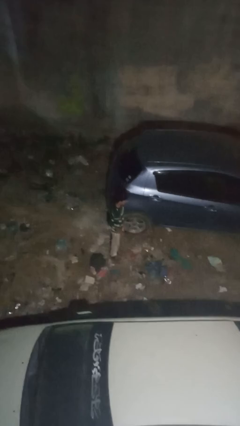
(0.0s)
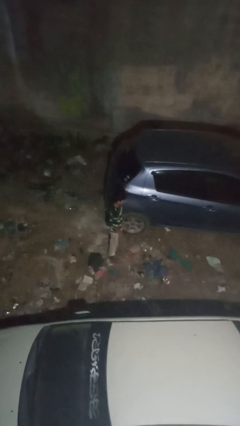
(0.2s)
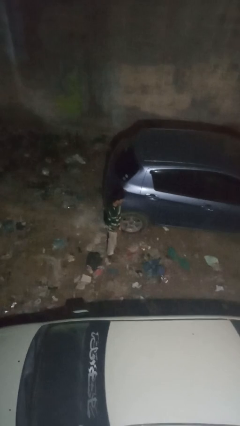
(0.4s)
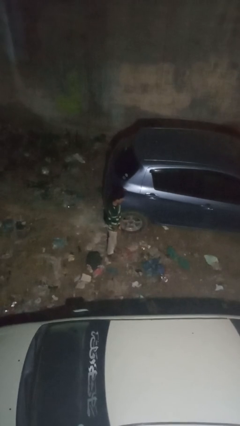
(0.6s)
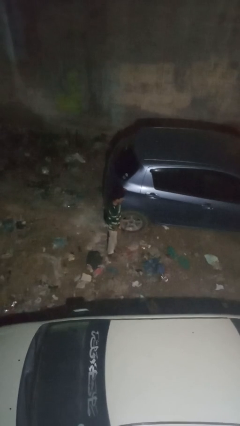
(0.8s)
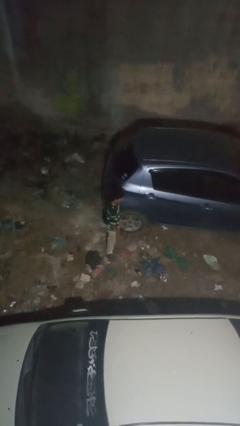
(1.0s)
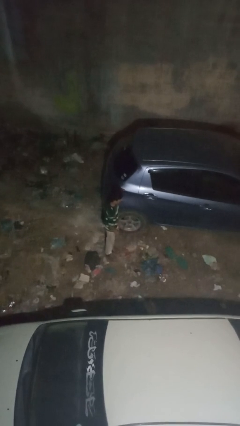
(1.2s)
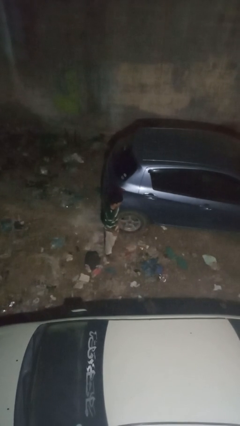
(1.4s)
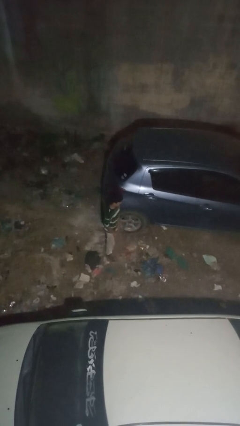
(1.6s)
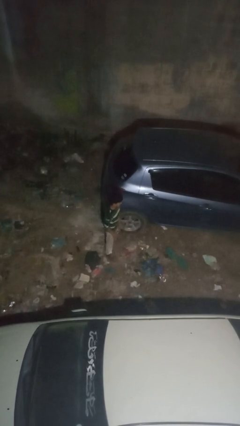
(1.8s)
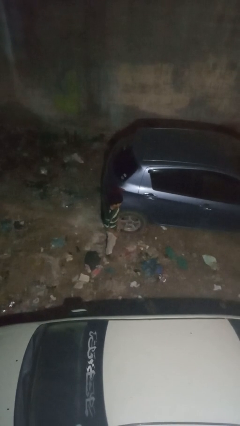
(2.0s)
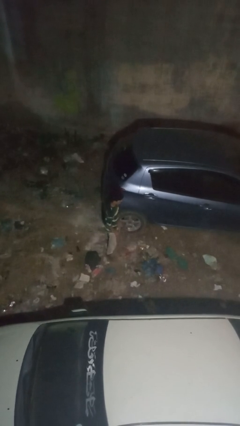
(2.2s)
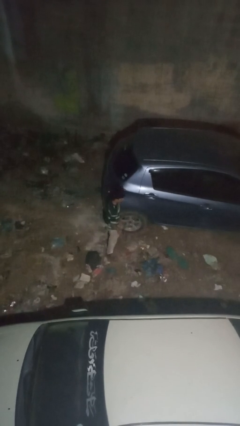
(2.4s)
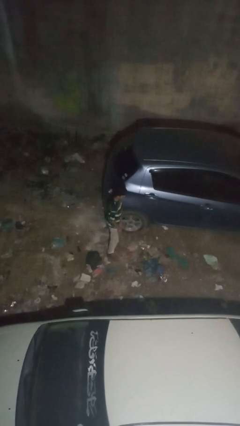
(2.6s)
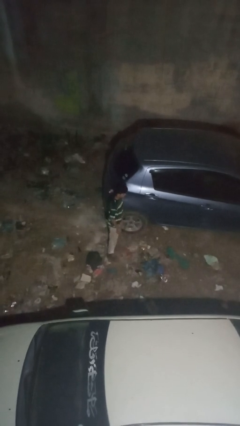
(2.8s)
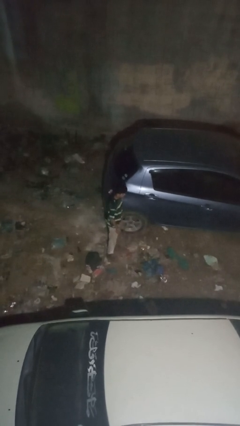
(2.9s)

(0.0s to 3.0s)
person kicks car tires

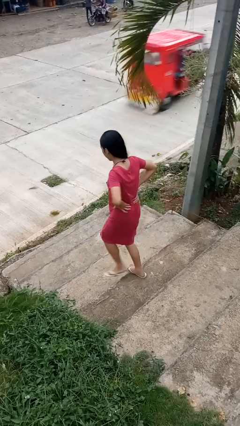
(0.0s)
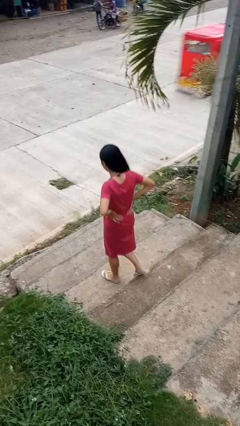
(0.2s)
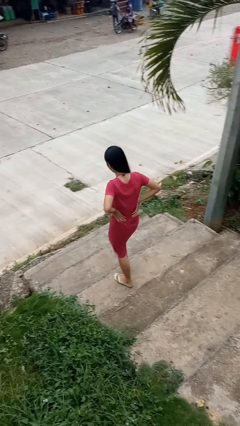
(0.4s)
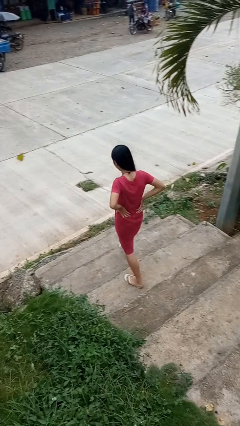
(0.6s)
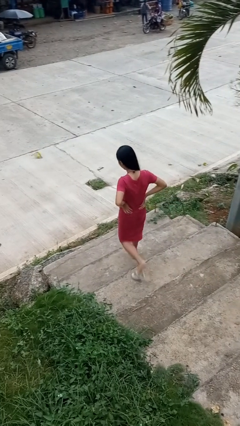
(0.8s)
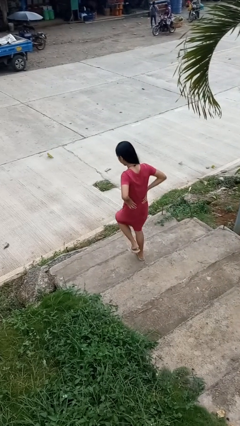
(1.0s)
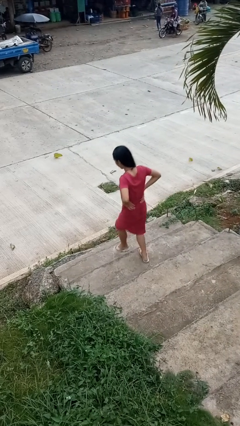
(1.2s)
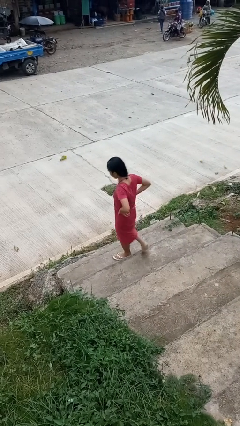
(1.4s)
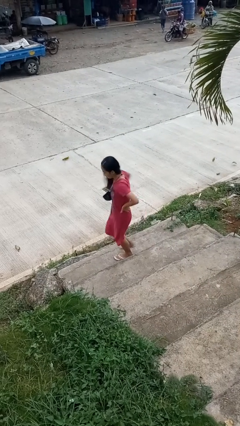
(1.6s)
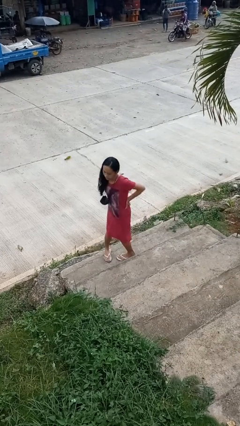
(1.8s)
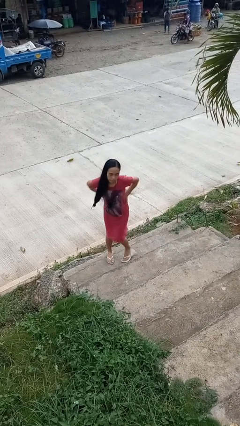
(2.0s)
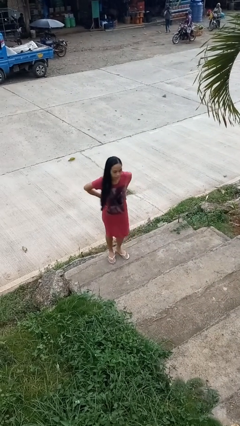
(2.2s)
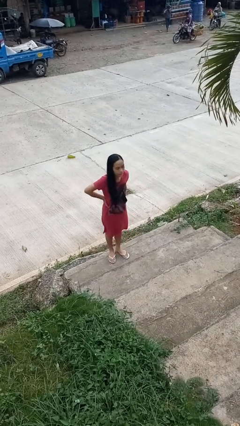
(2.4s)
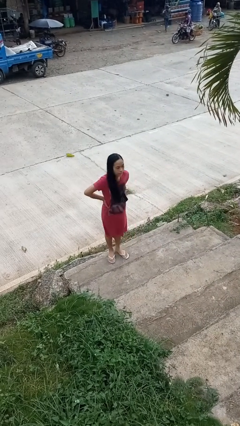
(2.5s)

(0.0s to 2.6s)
person climbs down stairs

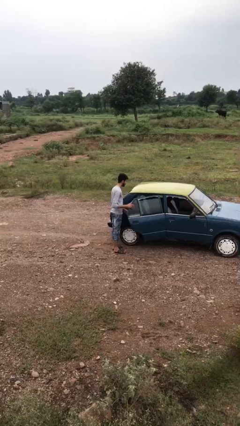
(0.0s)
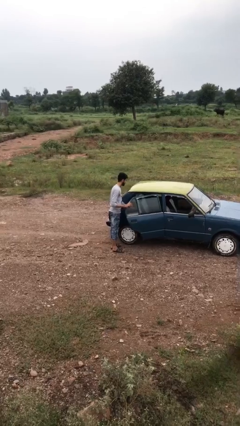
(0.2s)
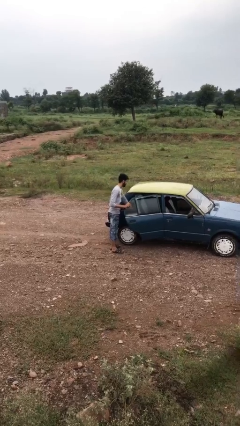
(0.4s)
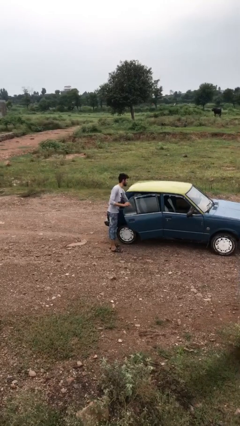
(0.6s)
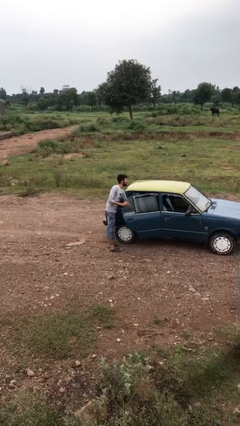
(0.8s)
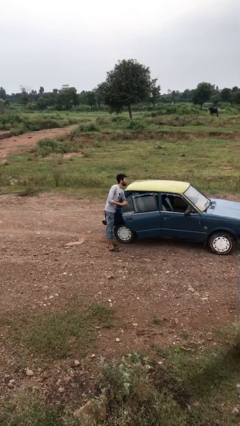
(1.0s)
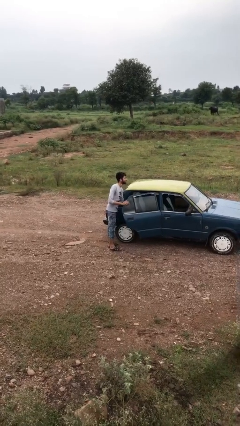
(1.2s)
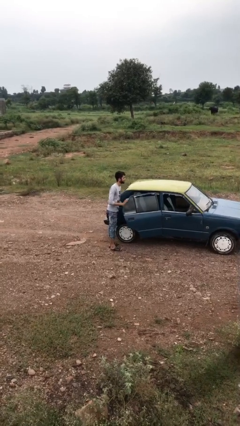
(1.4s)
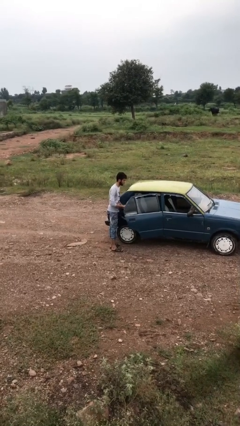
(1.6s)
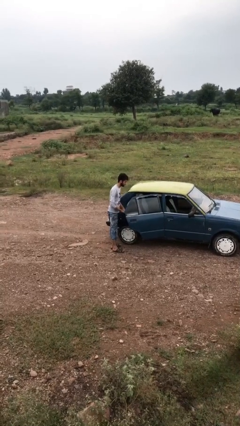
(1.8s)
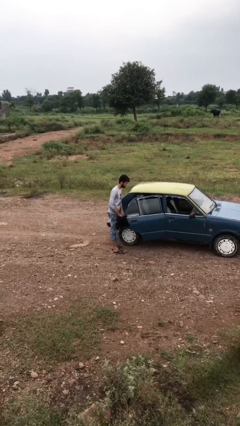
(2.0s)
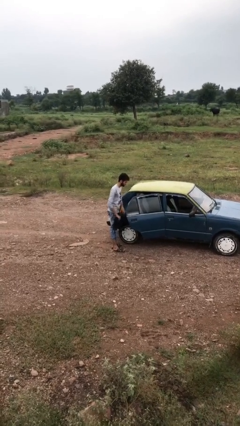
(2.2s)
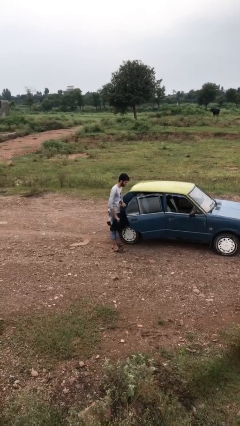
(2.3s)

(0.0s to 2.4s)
person unloads car

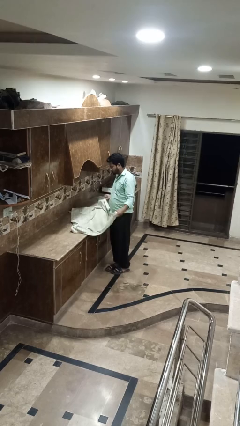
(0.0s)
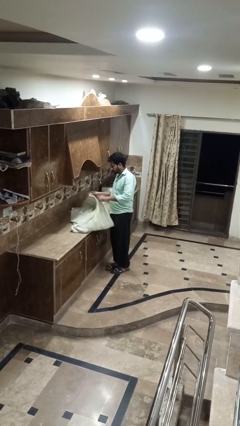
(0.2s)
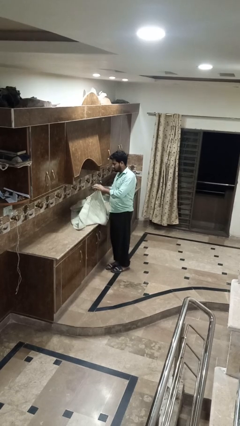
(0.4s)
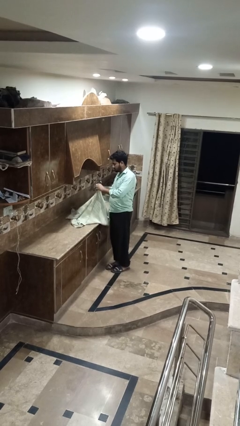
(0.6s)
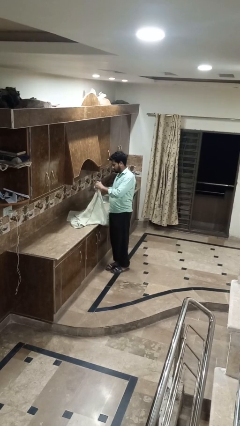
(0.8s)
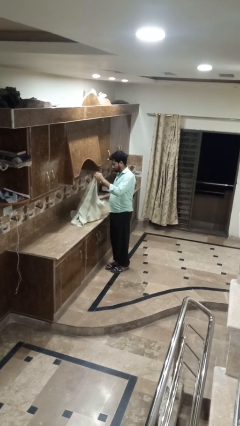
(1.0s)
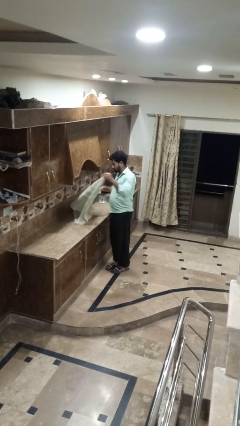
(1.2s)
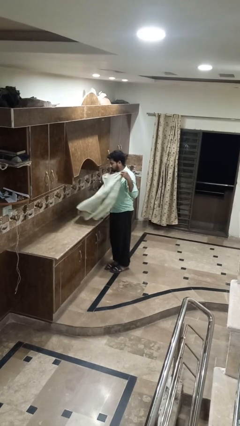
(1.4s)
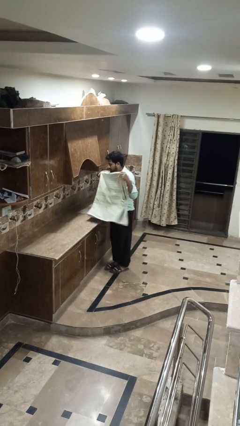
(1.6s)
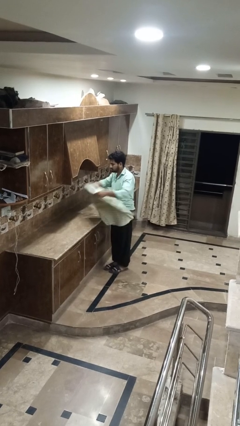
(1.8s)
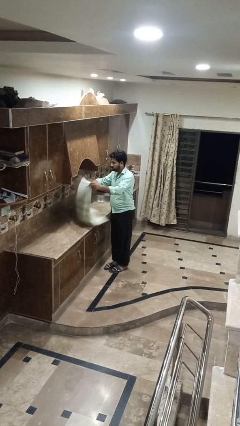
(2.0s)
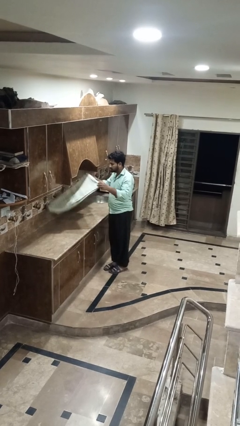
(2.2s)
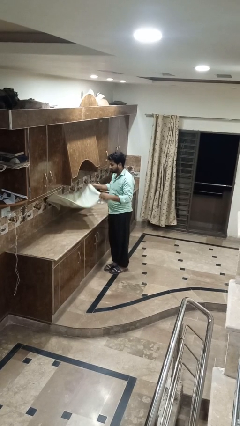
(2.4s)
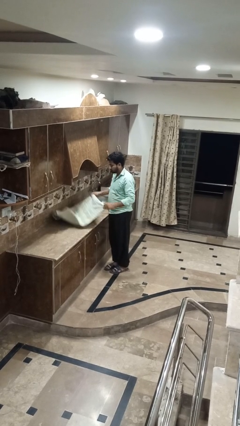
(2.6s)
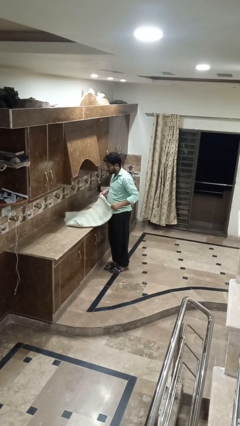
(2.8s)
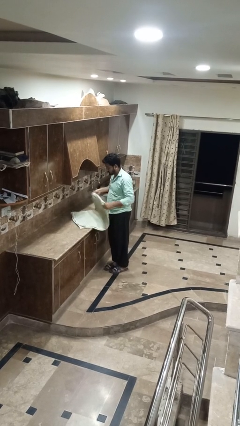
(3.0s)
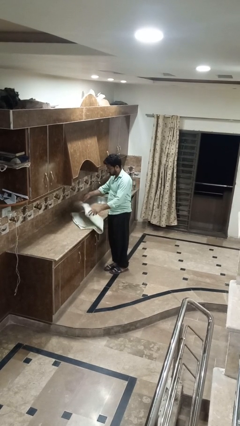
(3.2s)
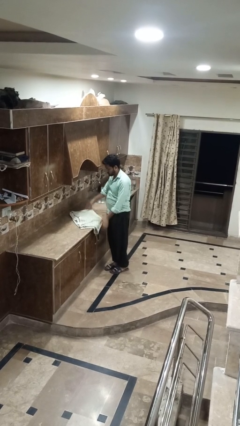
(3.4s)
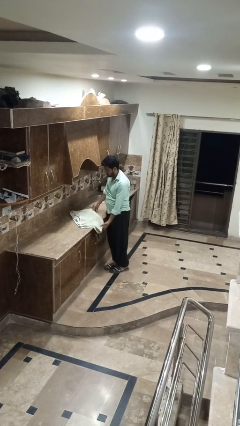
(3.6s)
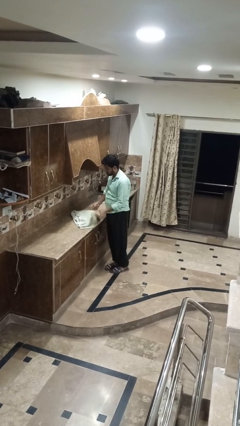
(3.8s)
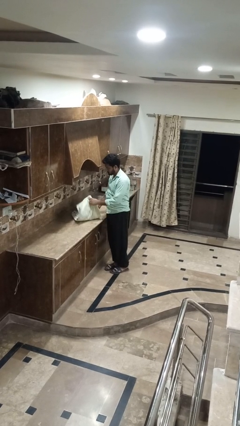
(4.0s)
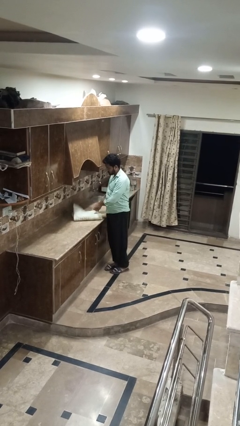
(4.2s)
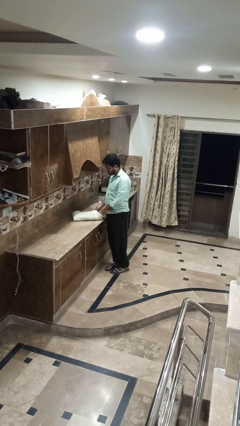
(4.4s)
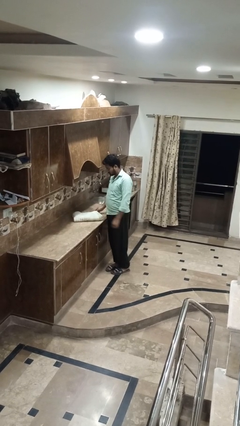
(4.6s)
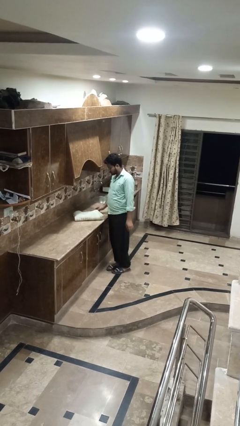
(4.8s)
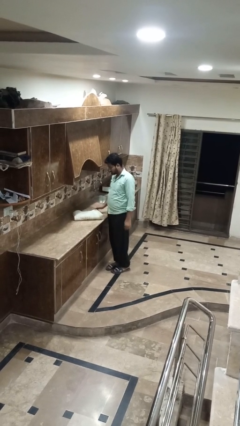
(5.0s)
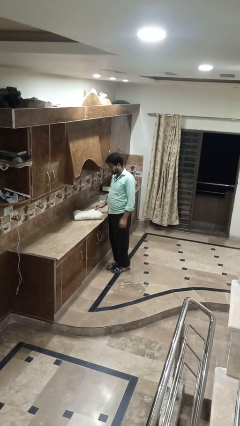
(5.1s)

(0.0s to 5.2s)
person folds towel

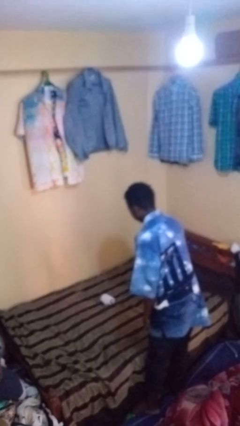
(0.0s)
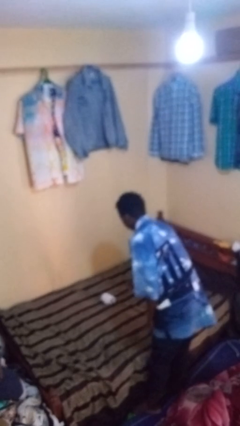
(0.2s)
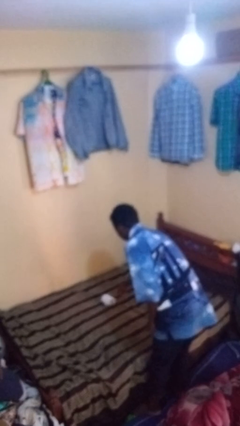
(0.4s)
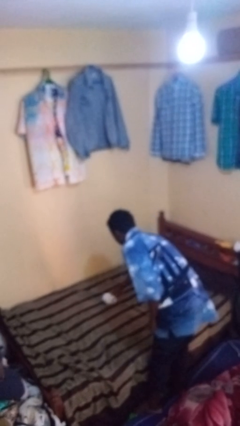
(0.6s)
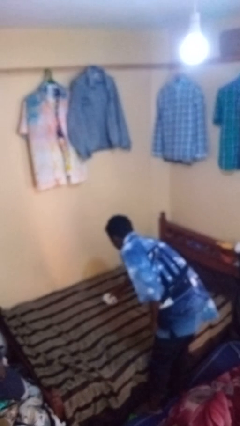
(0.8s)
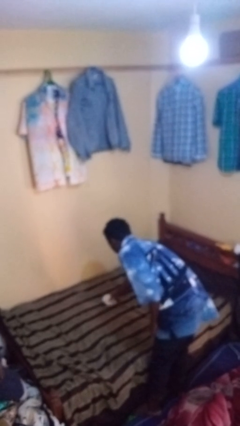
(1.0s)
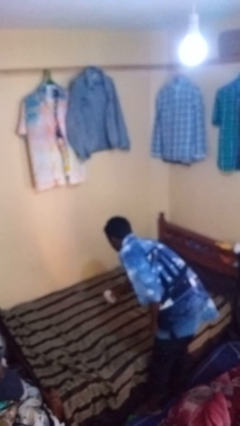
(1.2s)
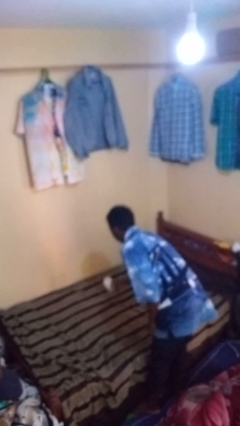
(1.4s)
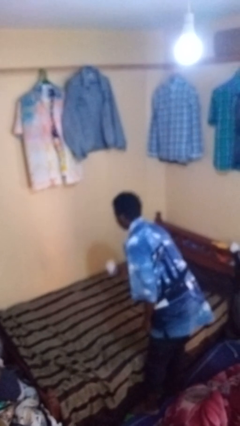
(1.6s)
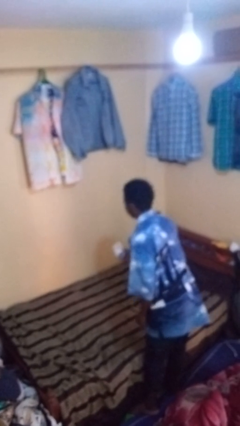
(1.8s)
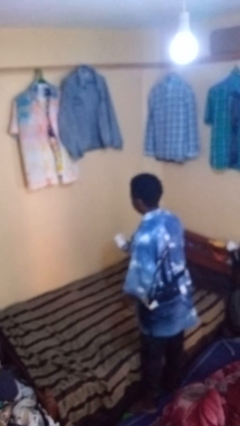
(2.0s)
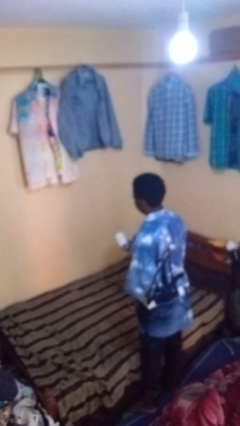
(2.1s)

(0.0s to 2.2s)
person picks up object from bed

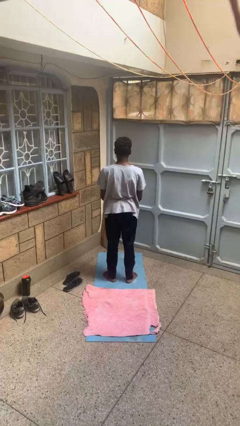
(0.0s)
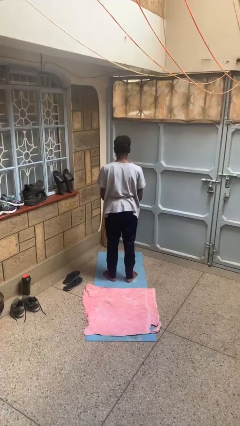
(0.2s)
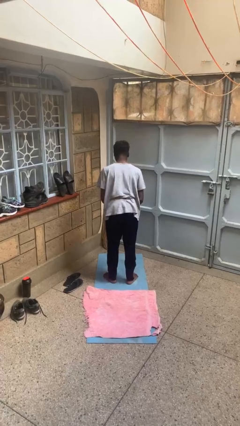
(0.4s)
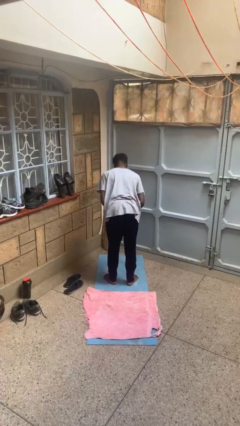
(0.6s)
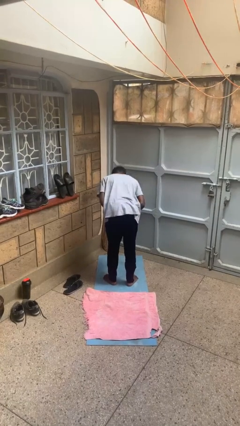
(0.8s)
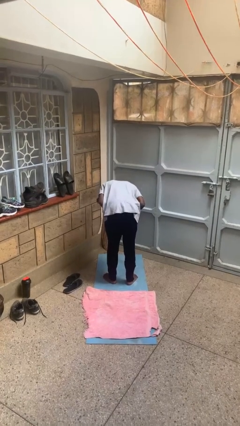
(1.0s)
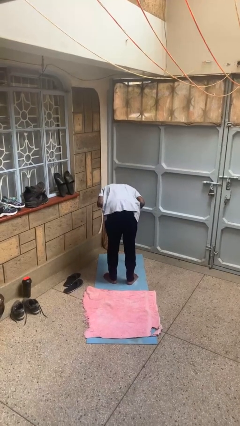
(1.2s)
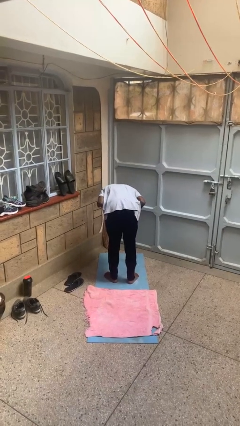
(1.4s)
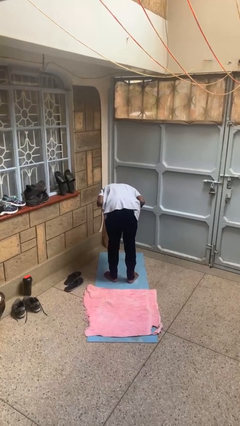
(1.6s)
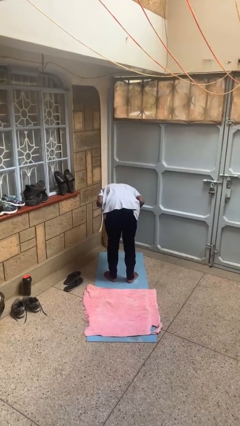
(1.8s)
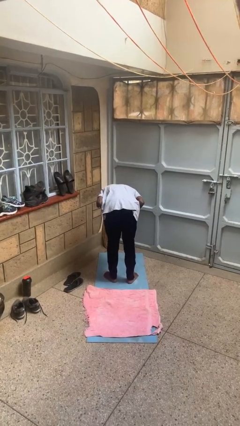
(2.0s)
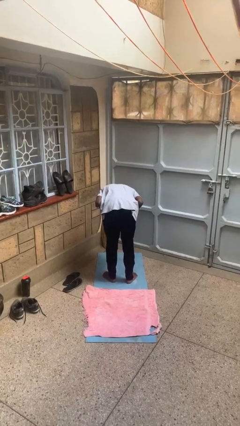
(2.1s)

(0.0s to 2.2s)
person bows

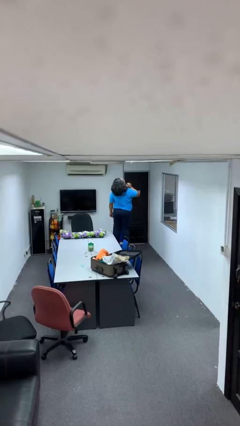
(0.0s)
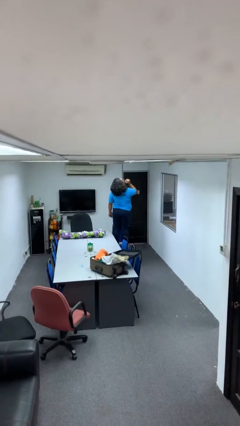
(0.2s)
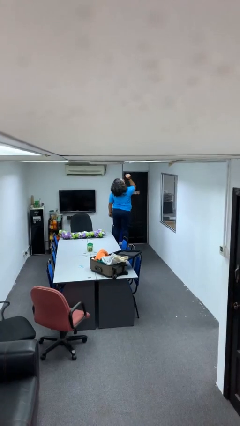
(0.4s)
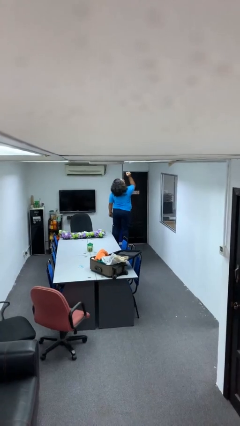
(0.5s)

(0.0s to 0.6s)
person takes down smoke detector
